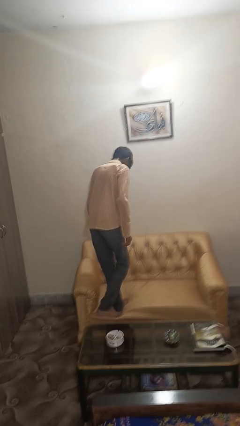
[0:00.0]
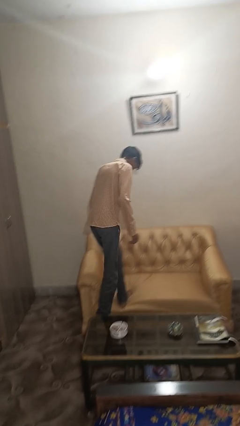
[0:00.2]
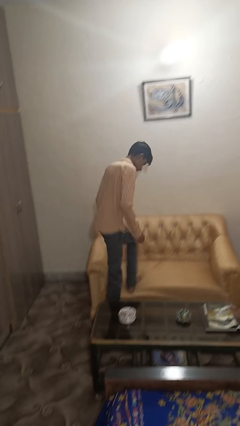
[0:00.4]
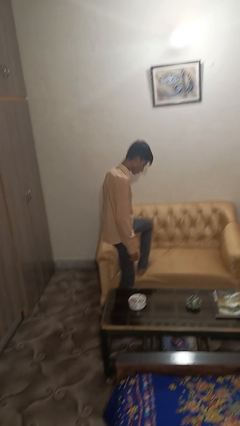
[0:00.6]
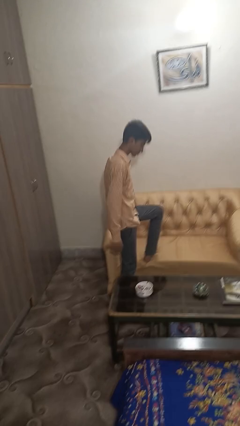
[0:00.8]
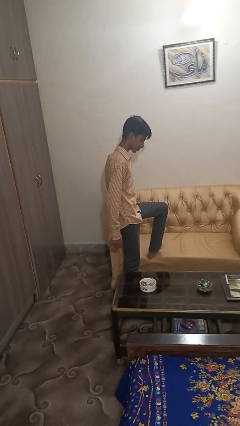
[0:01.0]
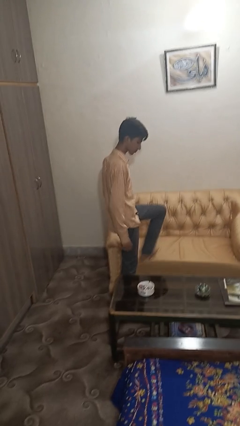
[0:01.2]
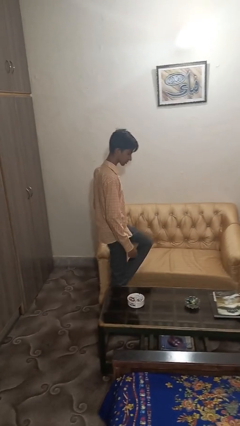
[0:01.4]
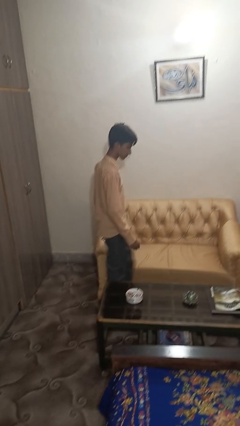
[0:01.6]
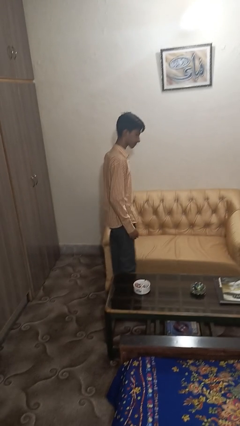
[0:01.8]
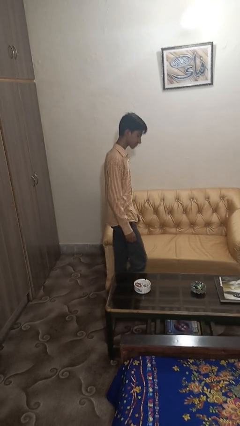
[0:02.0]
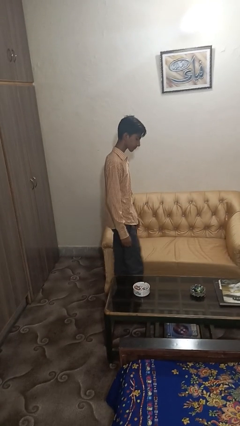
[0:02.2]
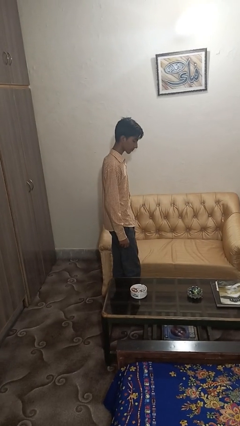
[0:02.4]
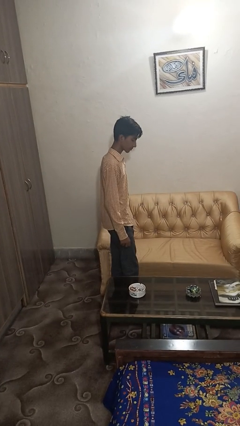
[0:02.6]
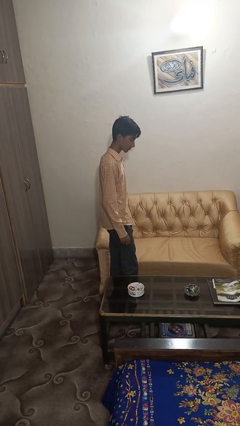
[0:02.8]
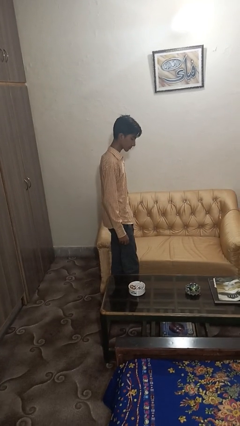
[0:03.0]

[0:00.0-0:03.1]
person climbs off couch

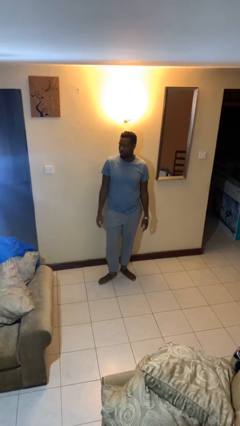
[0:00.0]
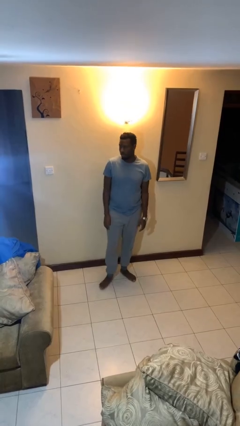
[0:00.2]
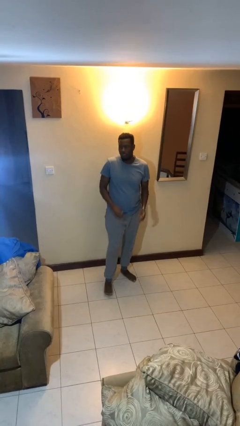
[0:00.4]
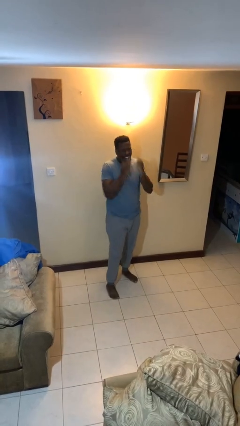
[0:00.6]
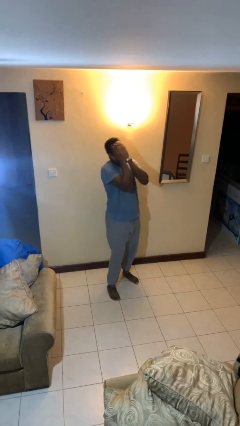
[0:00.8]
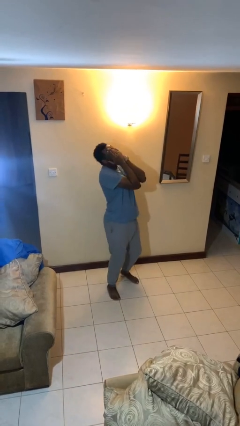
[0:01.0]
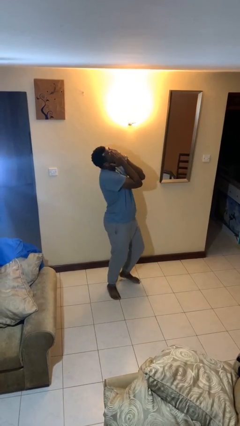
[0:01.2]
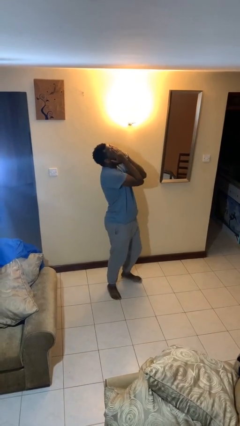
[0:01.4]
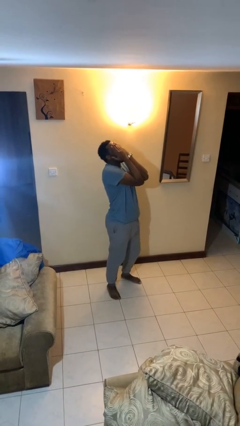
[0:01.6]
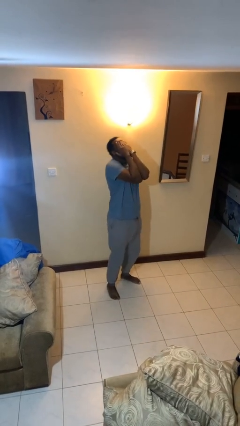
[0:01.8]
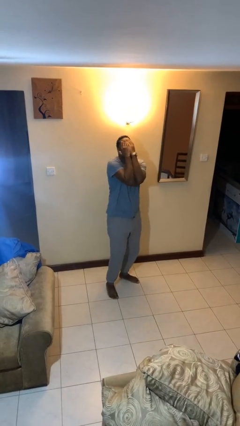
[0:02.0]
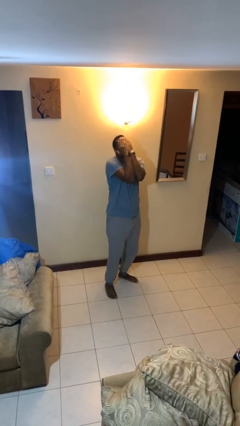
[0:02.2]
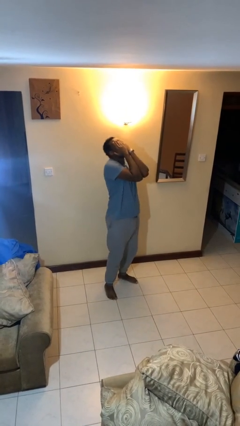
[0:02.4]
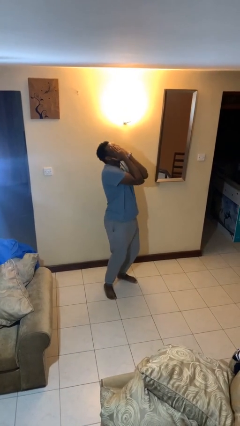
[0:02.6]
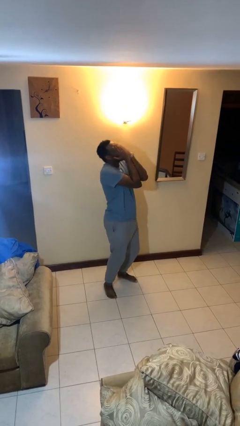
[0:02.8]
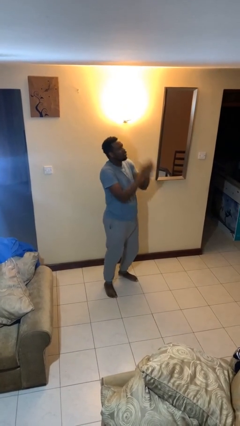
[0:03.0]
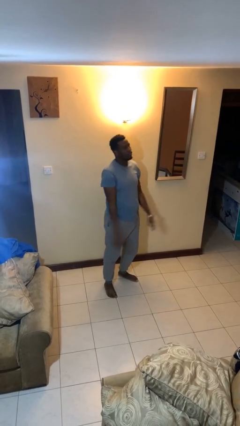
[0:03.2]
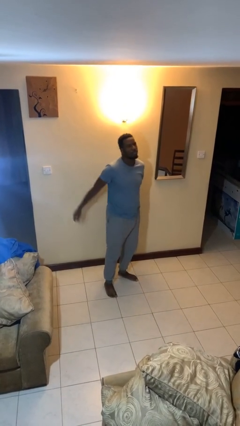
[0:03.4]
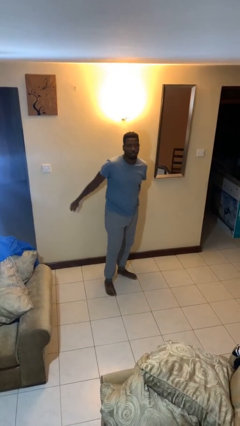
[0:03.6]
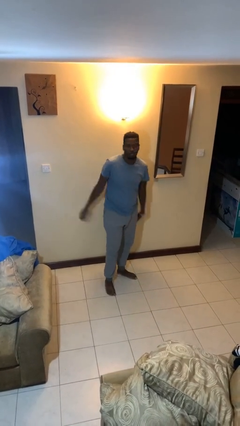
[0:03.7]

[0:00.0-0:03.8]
person covers face with hands

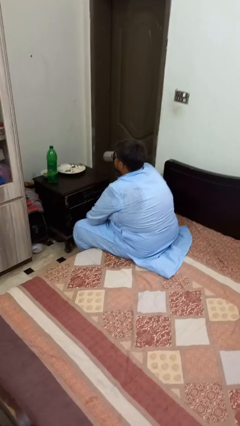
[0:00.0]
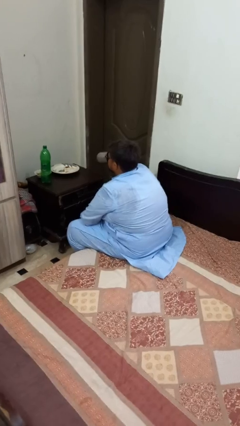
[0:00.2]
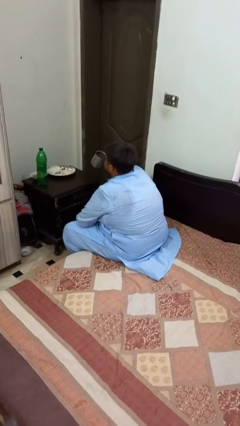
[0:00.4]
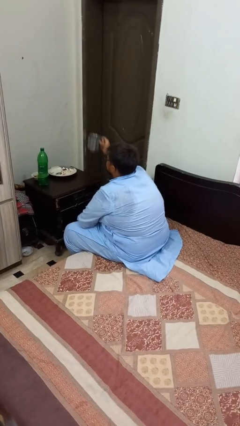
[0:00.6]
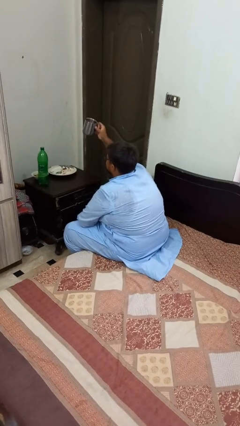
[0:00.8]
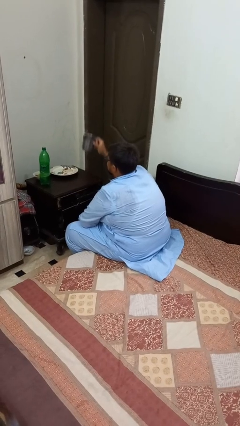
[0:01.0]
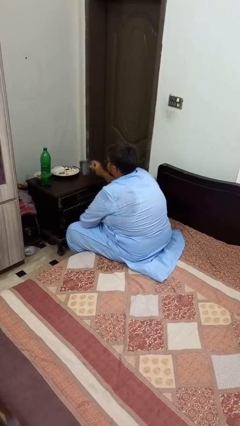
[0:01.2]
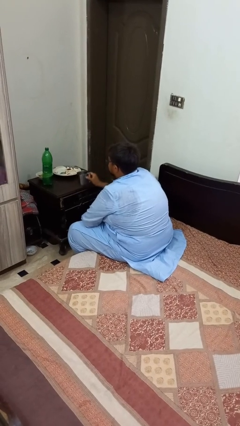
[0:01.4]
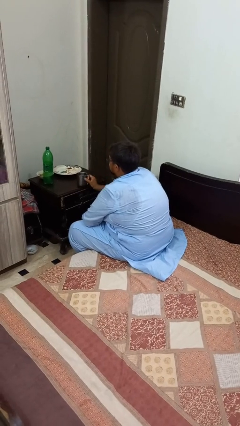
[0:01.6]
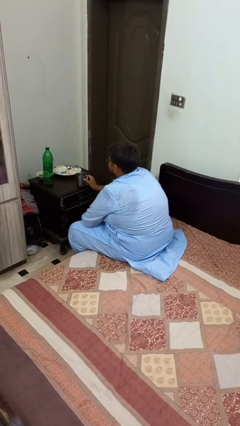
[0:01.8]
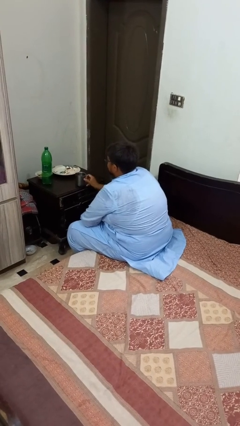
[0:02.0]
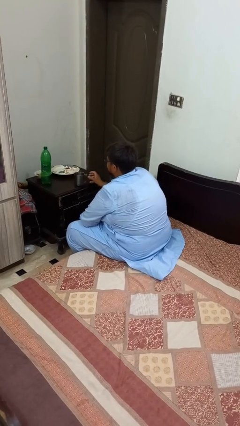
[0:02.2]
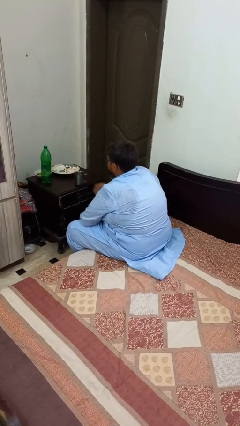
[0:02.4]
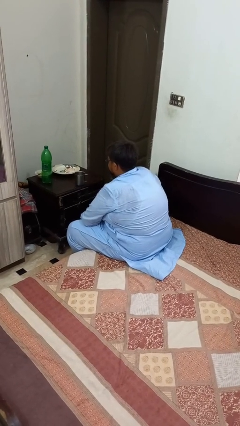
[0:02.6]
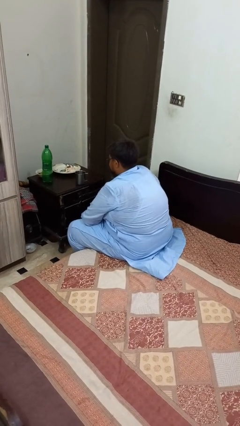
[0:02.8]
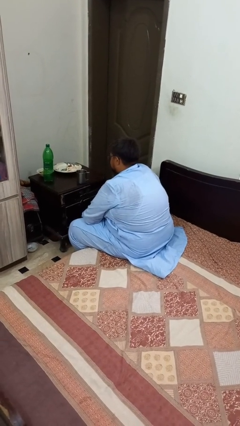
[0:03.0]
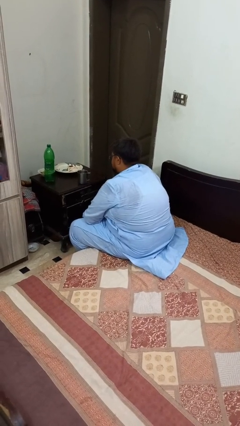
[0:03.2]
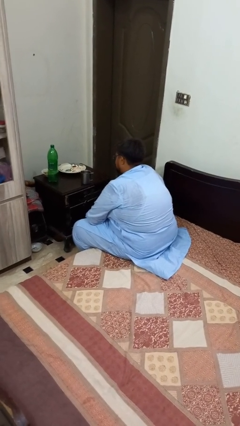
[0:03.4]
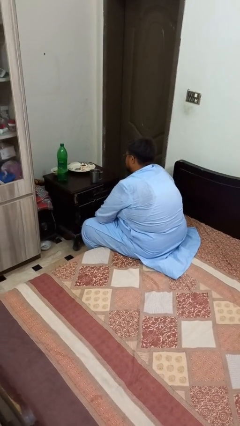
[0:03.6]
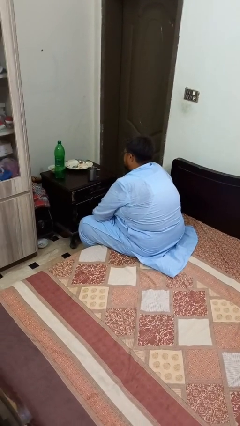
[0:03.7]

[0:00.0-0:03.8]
person puts down object on table

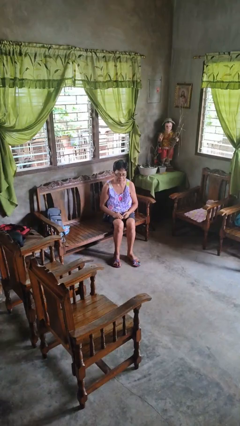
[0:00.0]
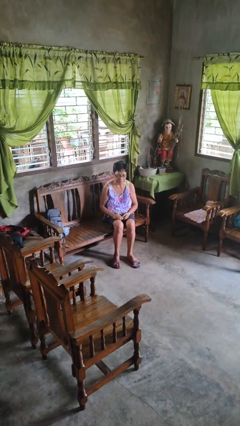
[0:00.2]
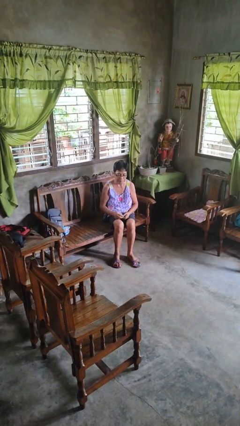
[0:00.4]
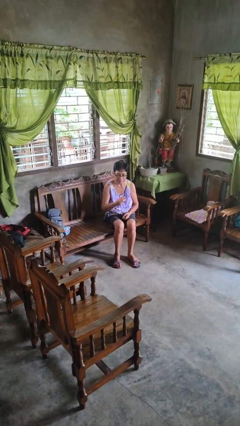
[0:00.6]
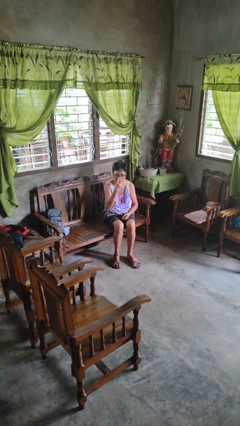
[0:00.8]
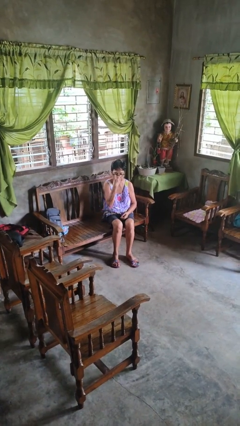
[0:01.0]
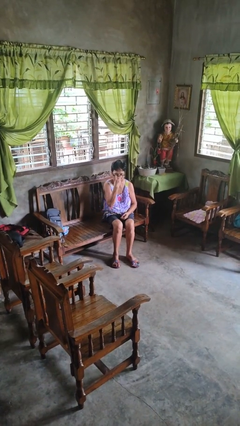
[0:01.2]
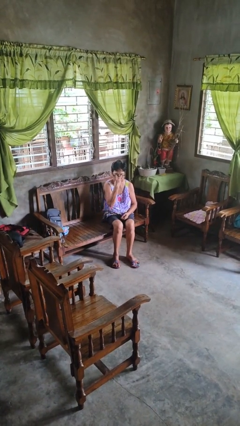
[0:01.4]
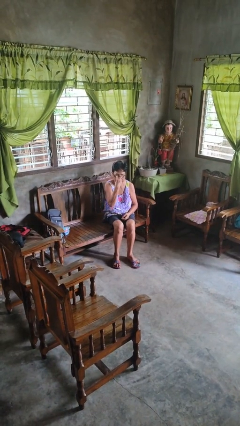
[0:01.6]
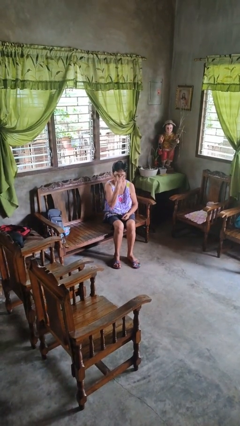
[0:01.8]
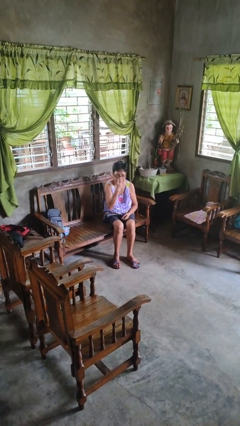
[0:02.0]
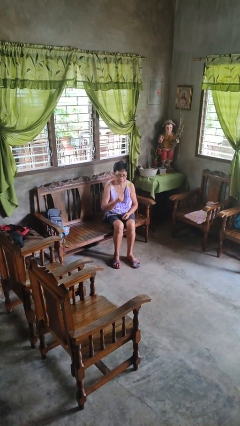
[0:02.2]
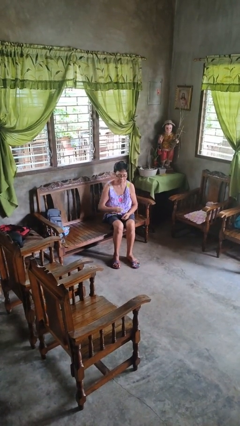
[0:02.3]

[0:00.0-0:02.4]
person gestures watch closely

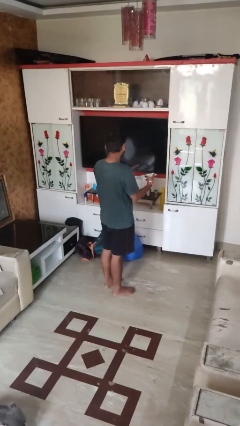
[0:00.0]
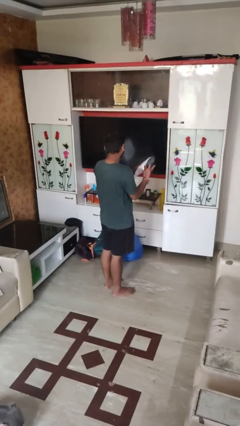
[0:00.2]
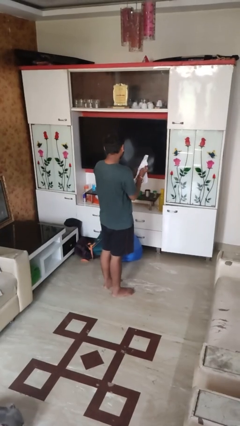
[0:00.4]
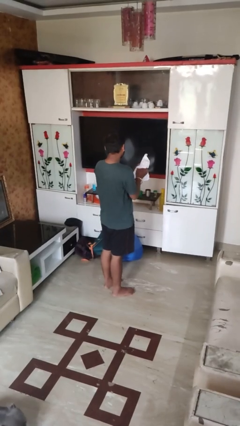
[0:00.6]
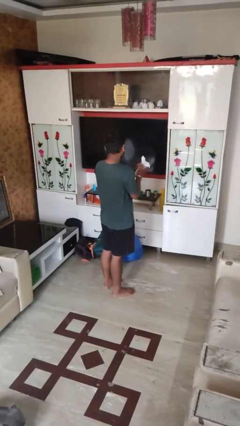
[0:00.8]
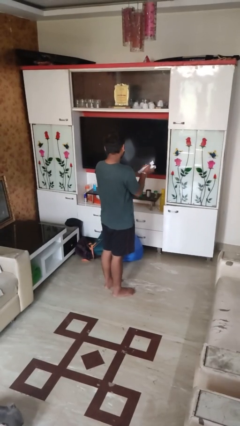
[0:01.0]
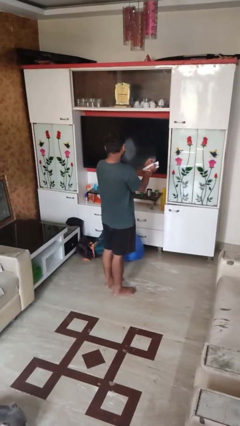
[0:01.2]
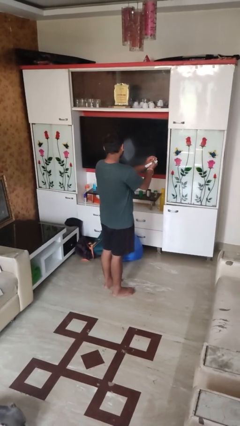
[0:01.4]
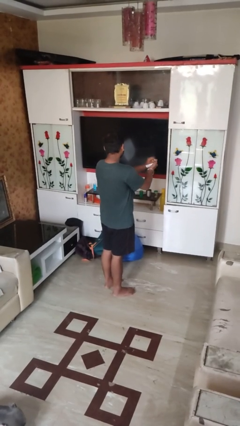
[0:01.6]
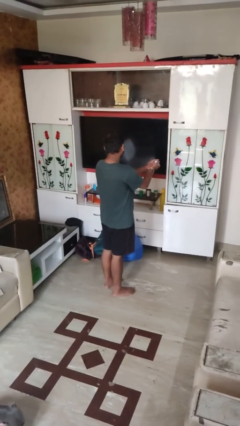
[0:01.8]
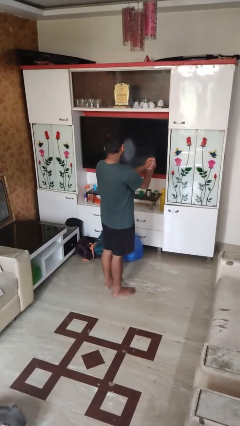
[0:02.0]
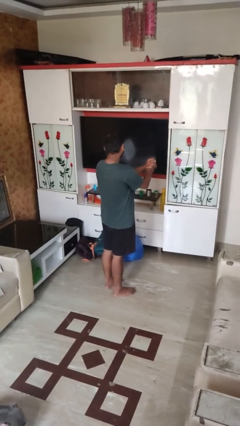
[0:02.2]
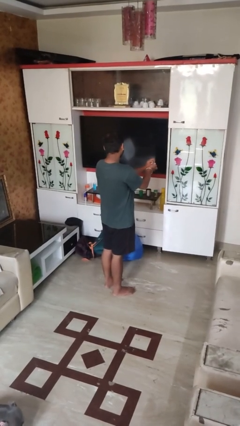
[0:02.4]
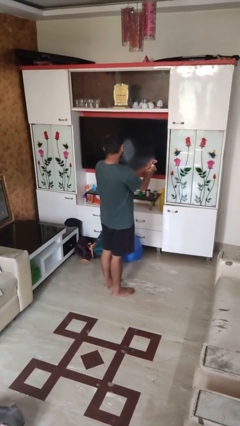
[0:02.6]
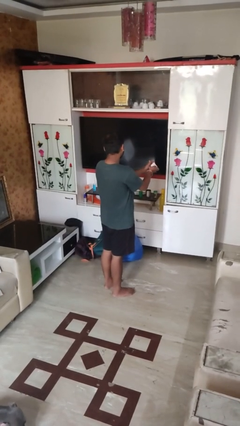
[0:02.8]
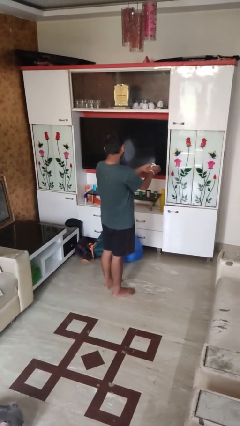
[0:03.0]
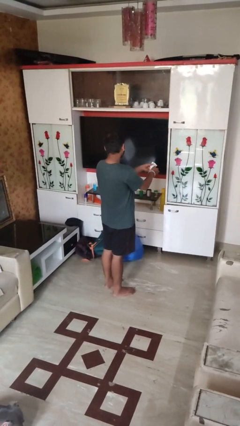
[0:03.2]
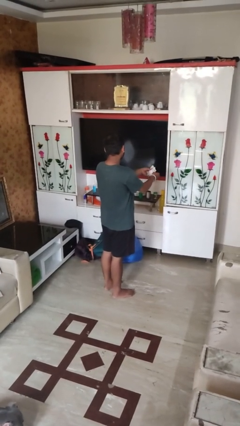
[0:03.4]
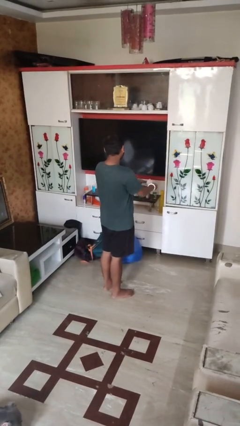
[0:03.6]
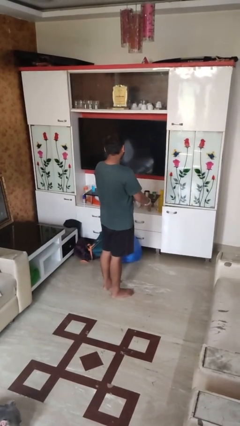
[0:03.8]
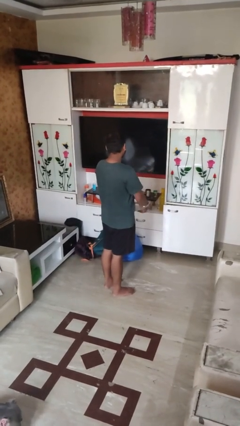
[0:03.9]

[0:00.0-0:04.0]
person crumples paper

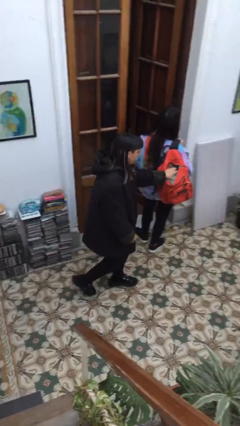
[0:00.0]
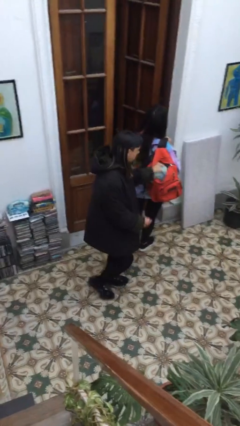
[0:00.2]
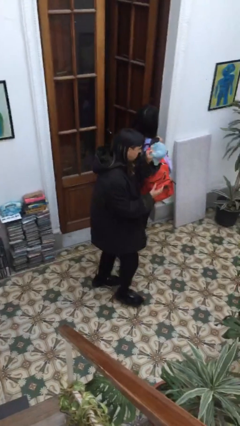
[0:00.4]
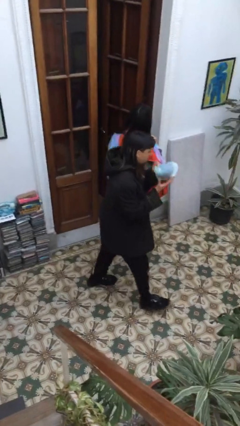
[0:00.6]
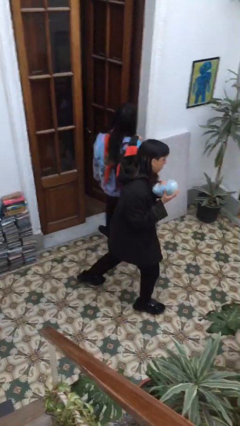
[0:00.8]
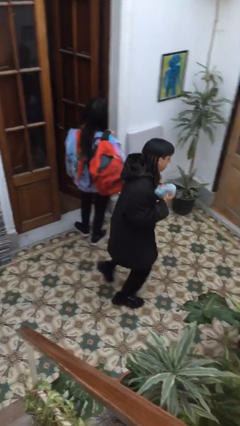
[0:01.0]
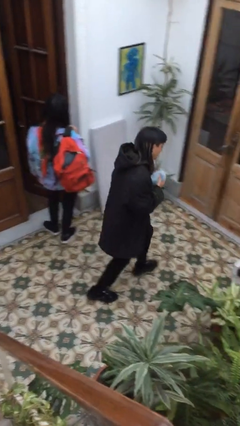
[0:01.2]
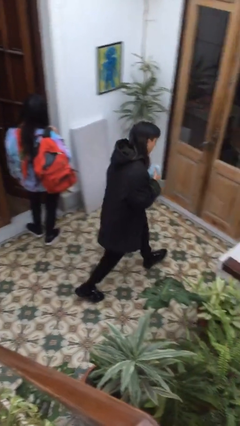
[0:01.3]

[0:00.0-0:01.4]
person steals object from person
